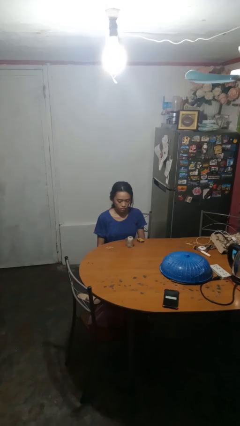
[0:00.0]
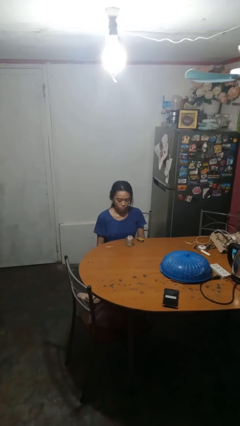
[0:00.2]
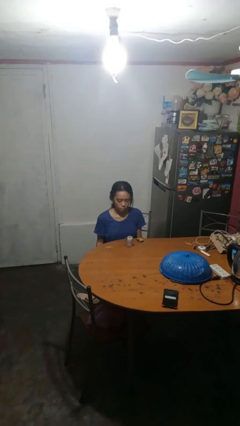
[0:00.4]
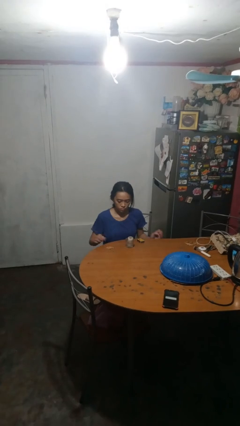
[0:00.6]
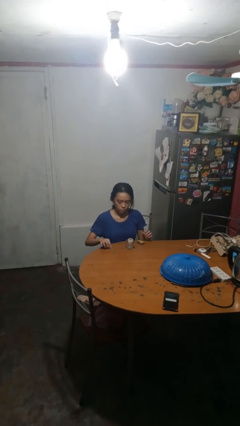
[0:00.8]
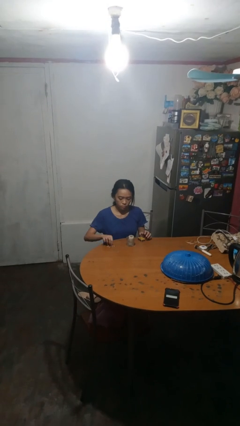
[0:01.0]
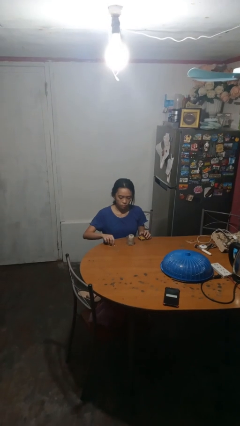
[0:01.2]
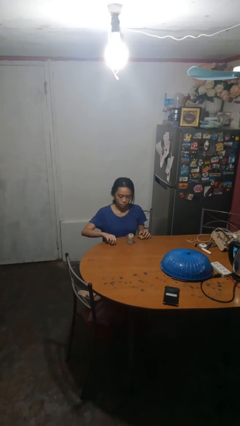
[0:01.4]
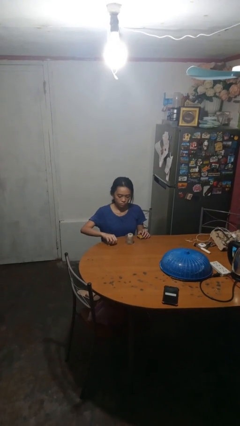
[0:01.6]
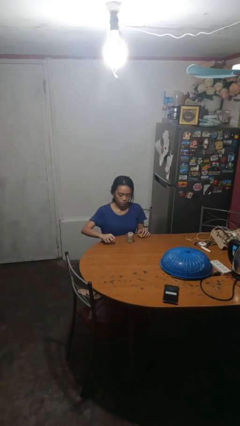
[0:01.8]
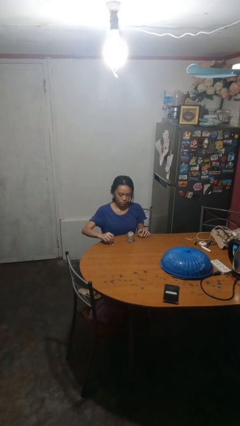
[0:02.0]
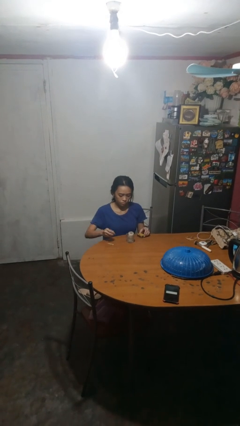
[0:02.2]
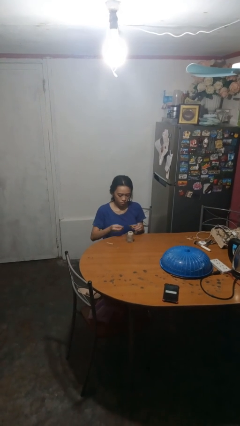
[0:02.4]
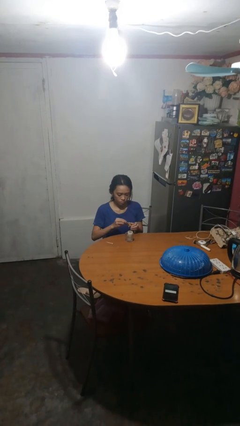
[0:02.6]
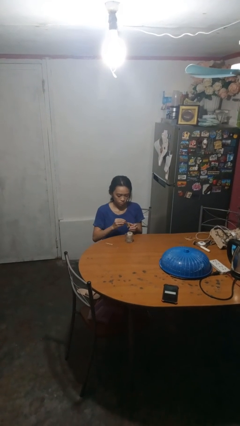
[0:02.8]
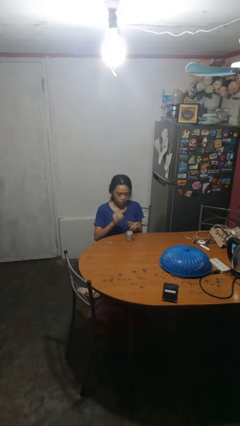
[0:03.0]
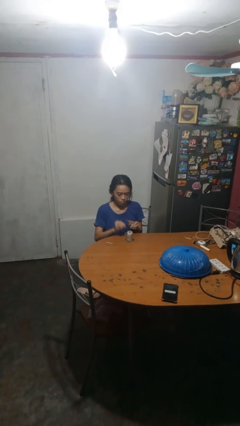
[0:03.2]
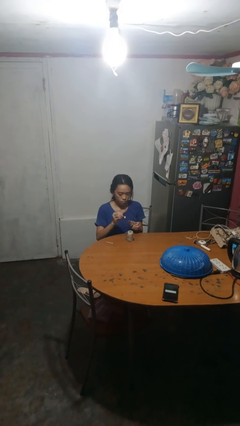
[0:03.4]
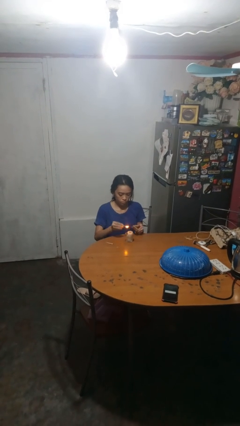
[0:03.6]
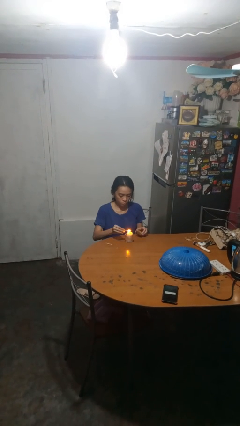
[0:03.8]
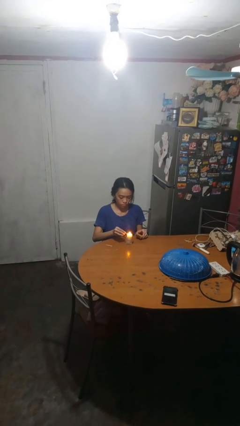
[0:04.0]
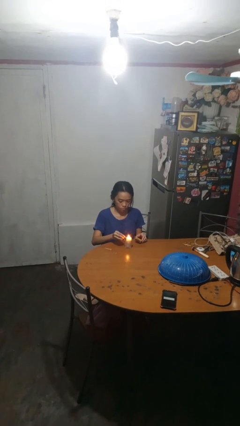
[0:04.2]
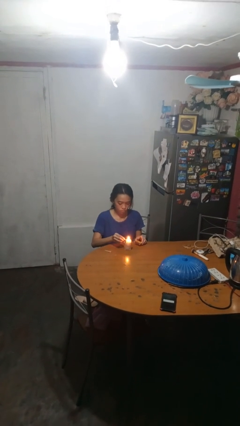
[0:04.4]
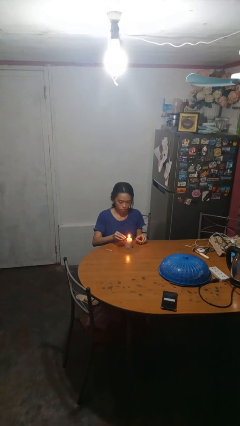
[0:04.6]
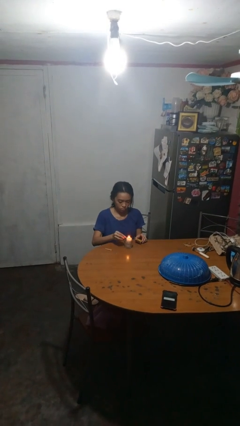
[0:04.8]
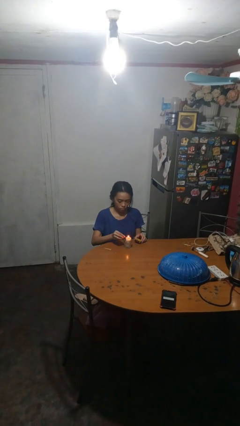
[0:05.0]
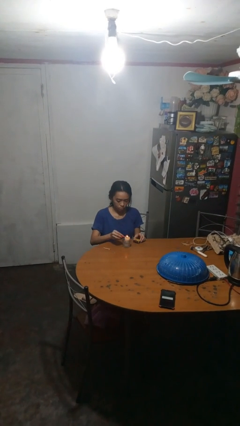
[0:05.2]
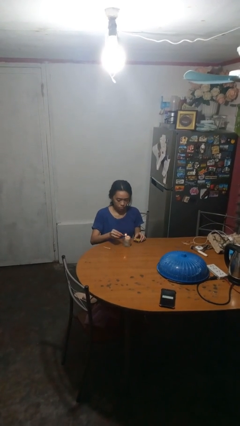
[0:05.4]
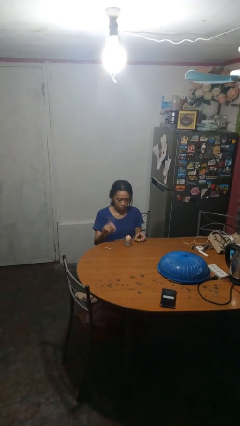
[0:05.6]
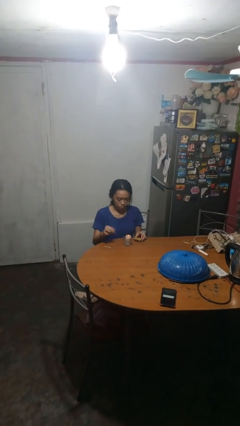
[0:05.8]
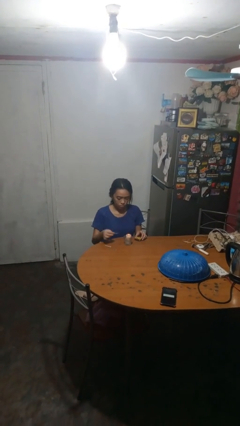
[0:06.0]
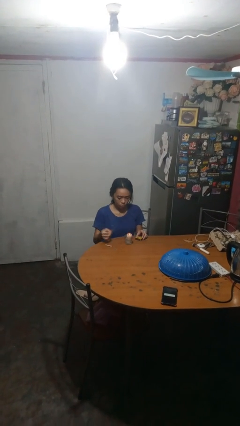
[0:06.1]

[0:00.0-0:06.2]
person lights candle

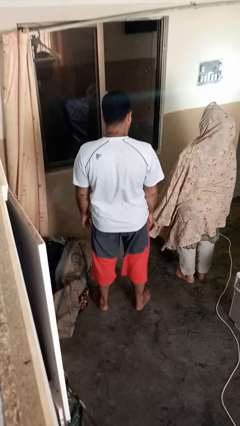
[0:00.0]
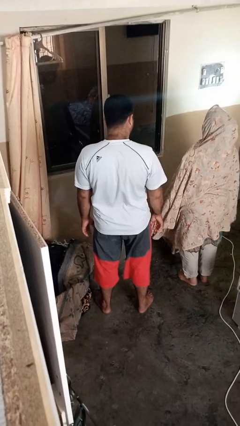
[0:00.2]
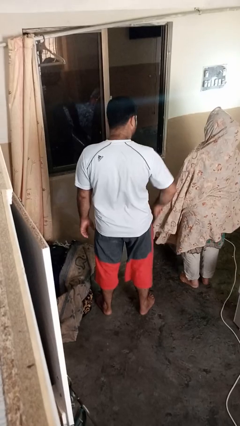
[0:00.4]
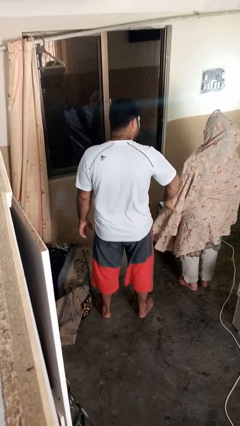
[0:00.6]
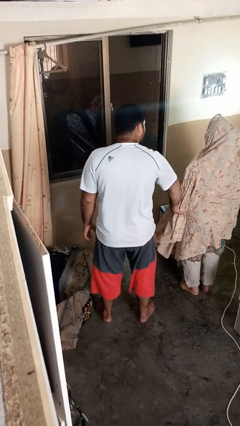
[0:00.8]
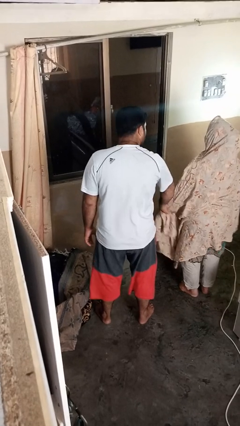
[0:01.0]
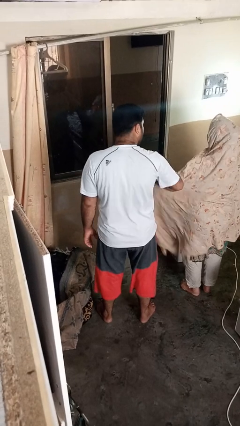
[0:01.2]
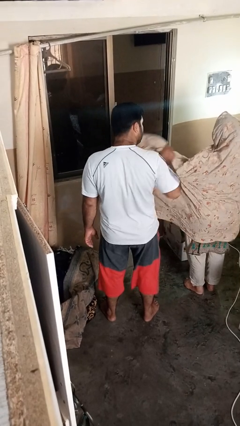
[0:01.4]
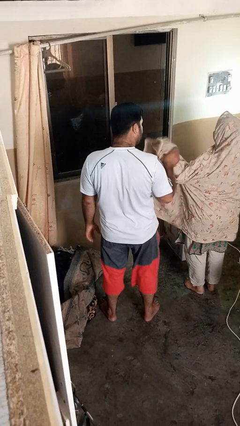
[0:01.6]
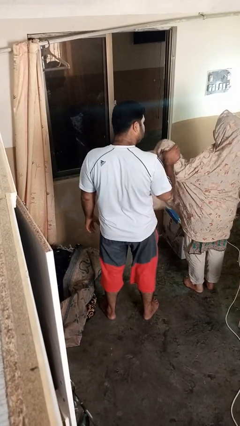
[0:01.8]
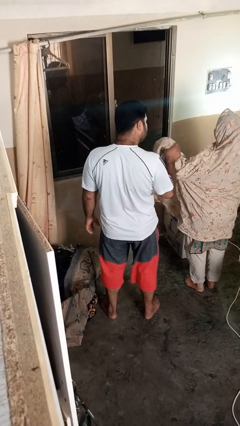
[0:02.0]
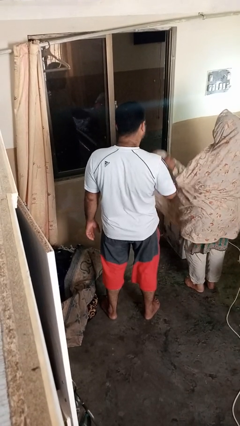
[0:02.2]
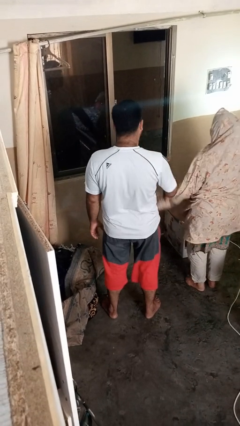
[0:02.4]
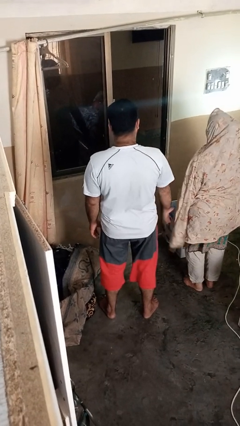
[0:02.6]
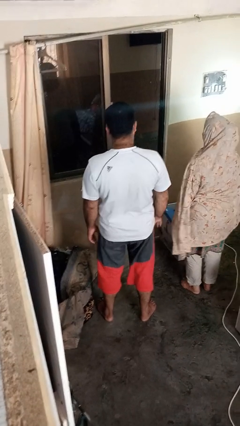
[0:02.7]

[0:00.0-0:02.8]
person grabs person by forearm

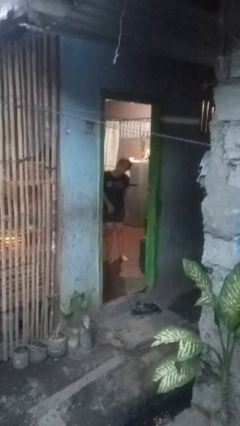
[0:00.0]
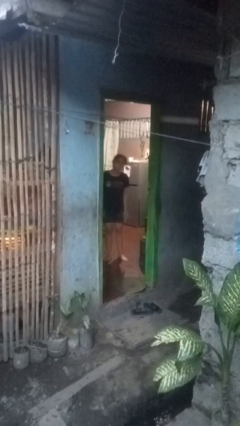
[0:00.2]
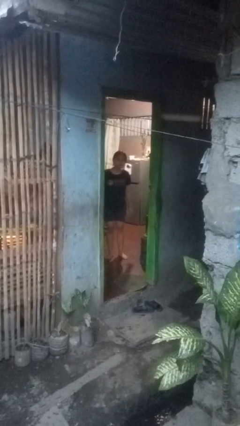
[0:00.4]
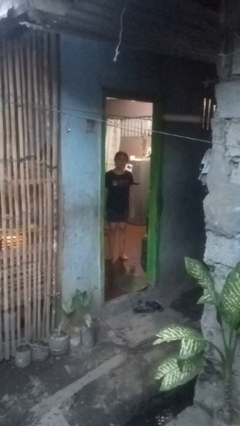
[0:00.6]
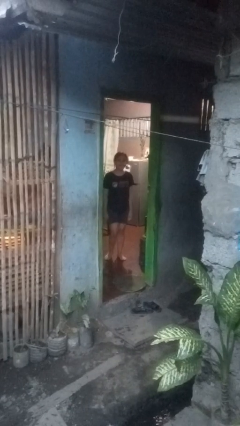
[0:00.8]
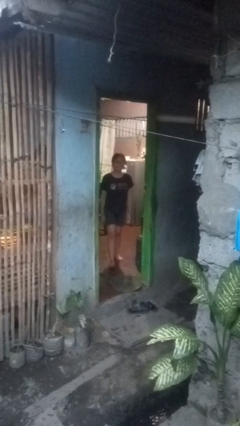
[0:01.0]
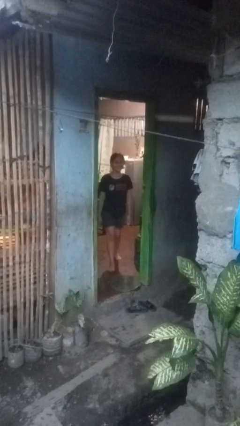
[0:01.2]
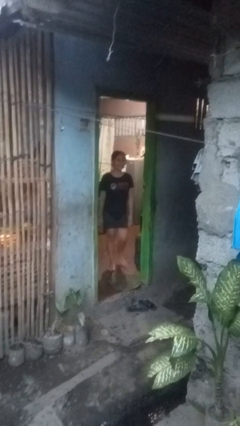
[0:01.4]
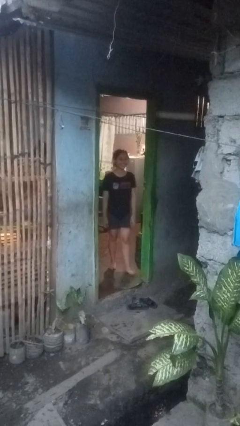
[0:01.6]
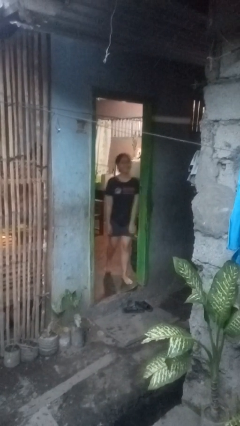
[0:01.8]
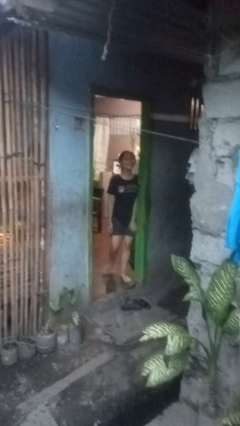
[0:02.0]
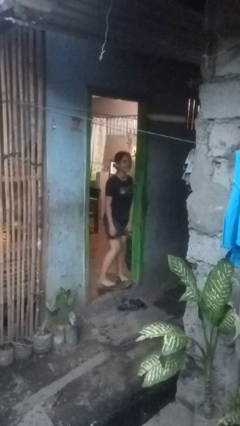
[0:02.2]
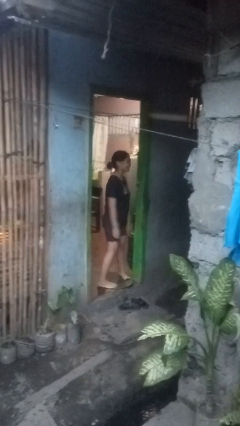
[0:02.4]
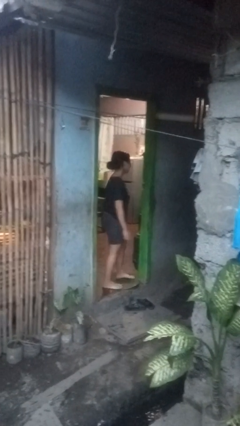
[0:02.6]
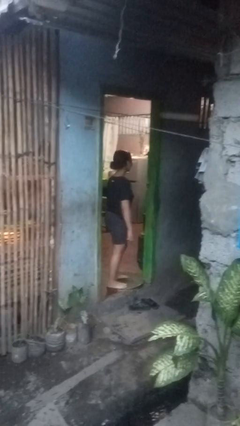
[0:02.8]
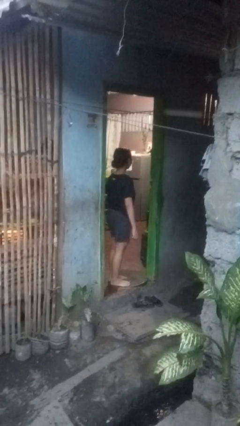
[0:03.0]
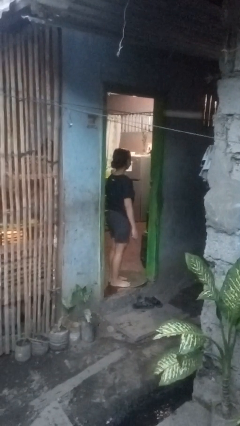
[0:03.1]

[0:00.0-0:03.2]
person bumps into wall

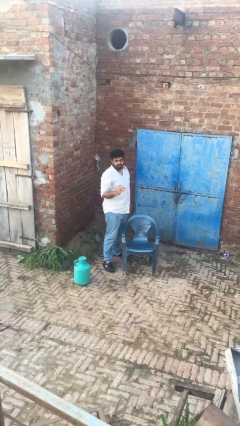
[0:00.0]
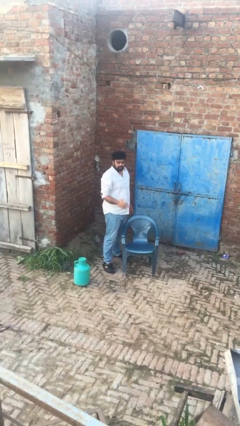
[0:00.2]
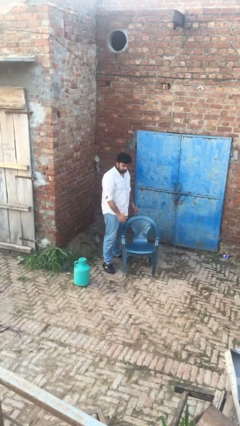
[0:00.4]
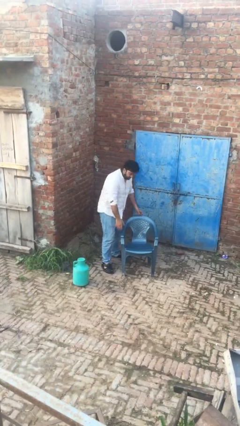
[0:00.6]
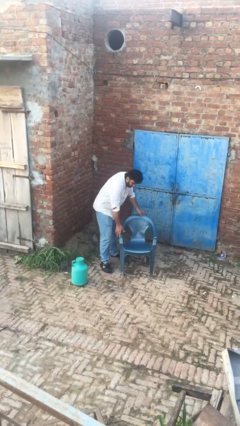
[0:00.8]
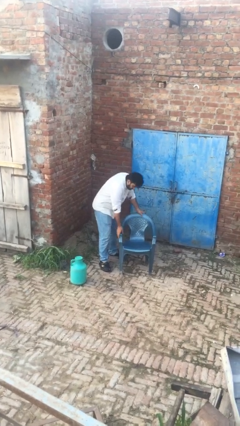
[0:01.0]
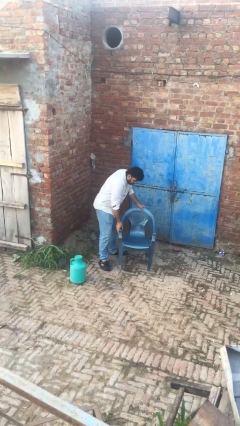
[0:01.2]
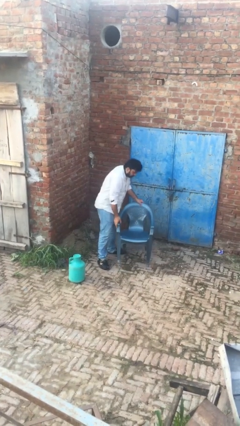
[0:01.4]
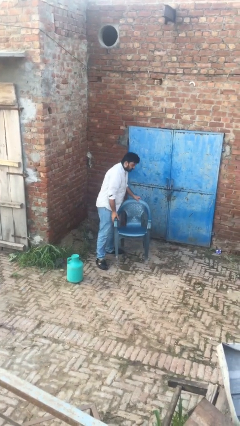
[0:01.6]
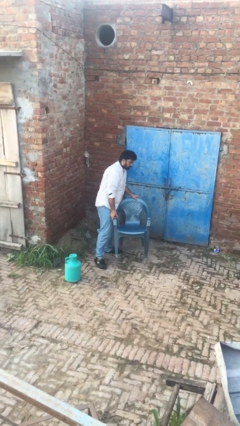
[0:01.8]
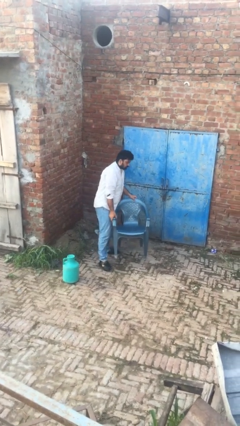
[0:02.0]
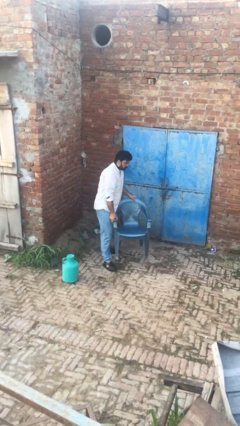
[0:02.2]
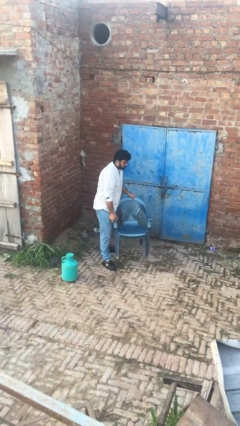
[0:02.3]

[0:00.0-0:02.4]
person picks up object from floor

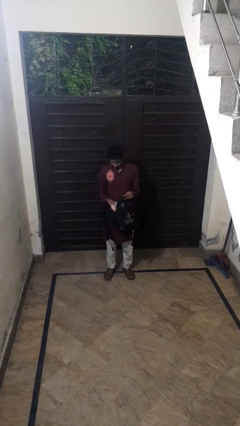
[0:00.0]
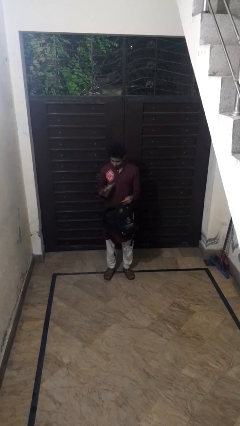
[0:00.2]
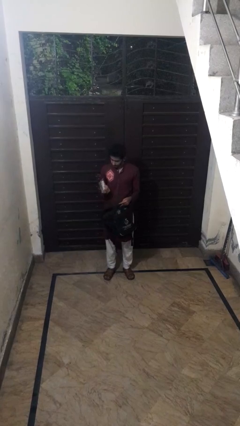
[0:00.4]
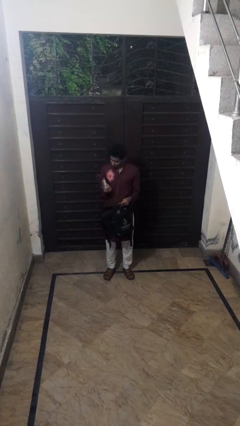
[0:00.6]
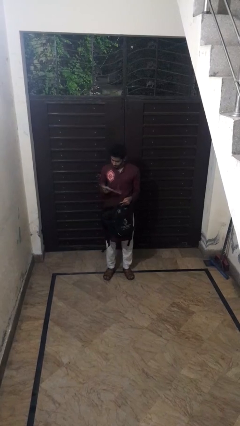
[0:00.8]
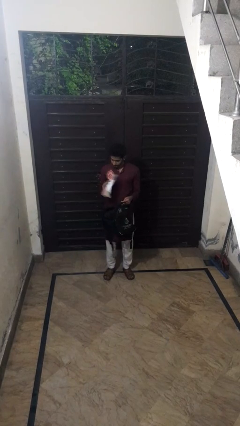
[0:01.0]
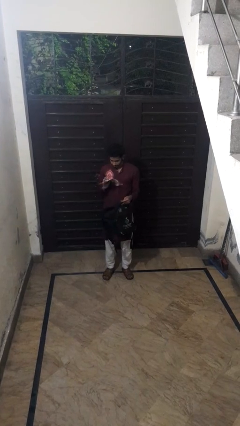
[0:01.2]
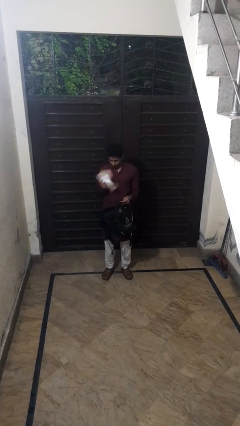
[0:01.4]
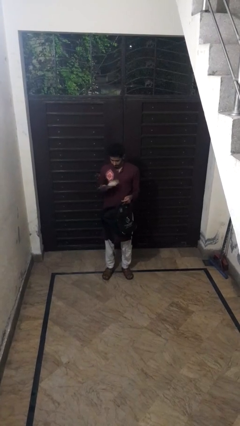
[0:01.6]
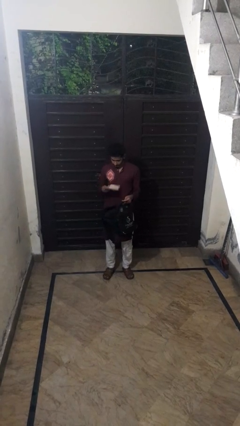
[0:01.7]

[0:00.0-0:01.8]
person takes object from backpack

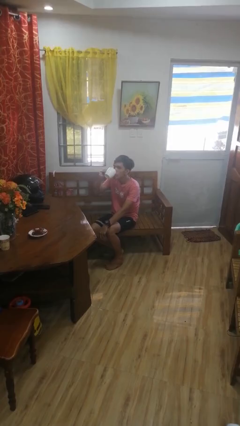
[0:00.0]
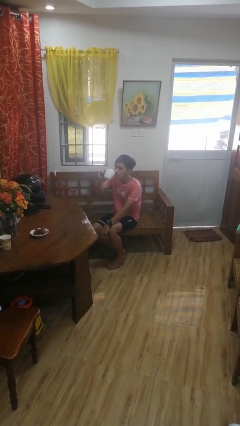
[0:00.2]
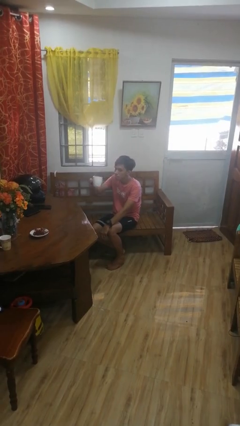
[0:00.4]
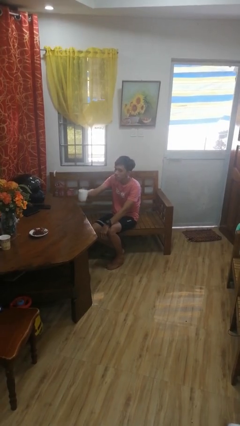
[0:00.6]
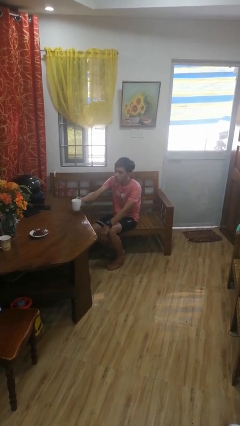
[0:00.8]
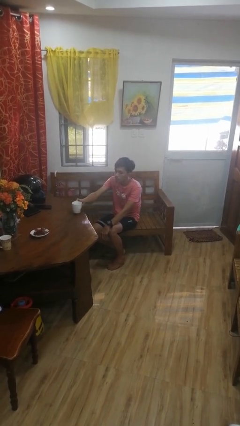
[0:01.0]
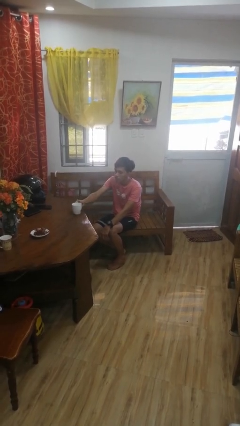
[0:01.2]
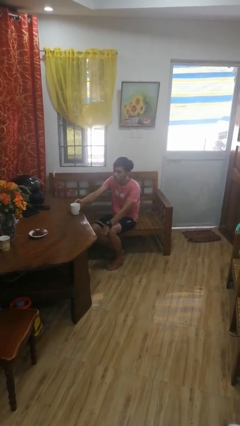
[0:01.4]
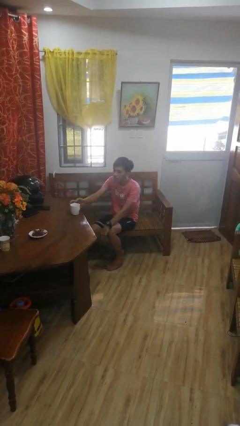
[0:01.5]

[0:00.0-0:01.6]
person puts down object on table
